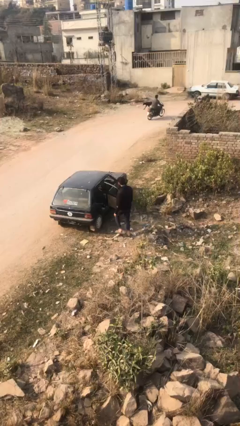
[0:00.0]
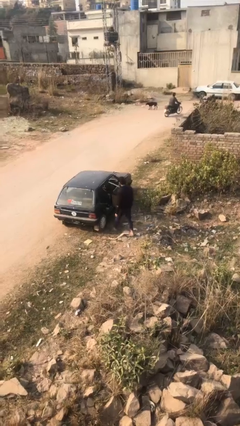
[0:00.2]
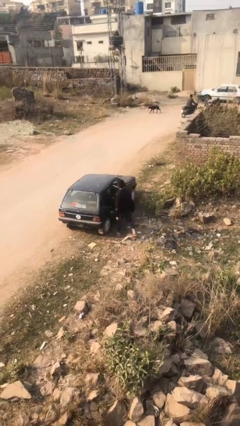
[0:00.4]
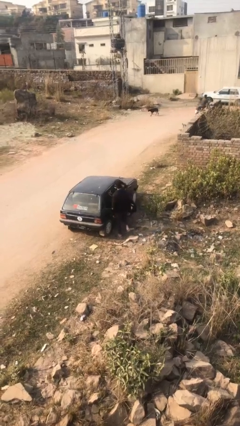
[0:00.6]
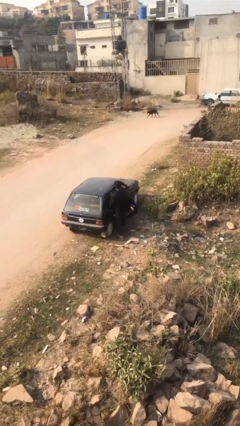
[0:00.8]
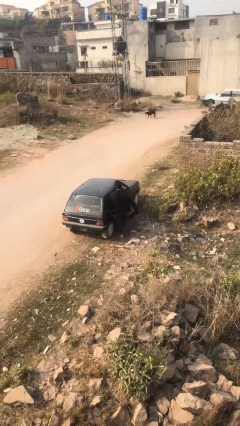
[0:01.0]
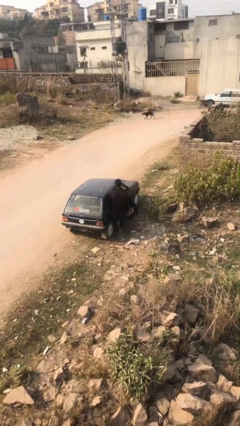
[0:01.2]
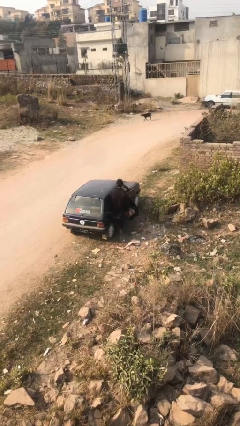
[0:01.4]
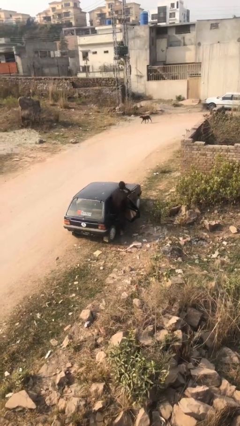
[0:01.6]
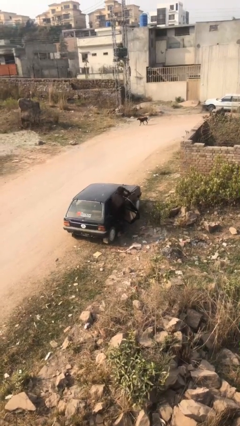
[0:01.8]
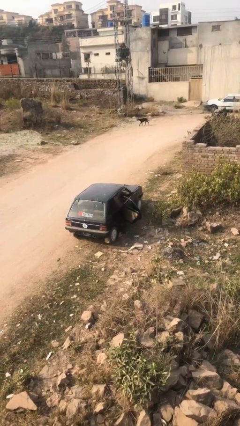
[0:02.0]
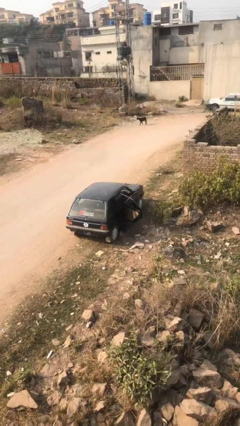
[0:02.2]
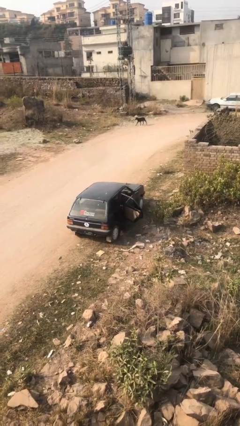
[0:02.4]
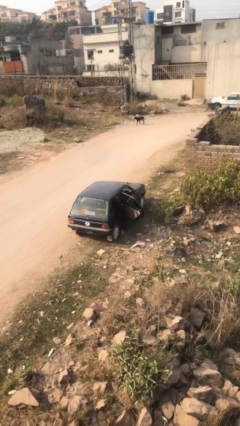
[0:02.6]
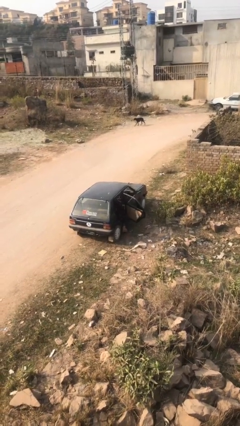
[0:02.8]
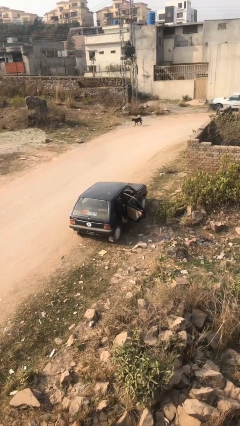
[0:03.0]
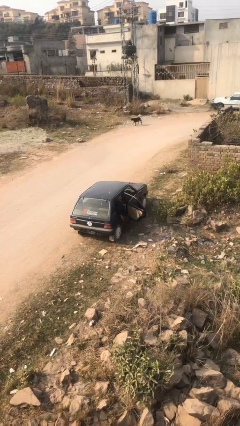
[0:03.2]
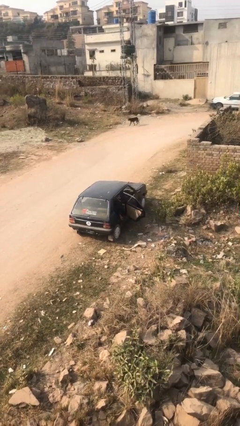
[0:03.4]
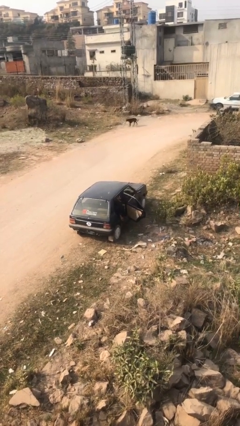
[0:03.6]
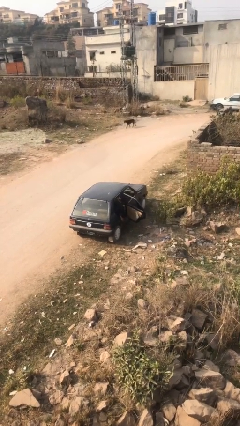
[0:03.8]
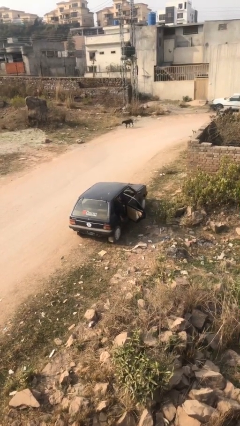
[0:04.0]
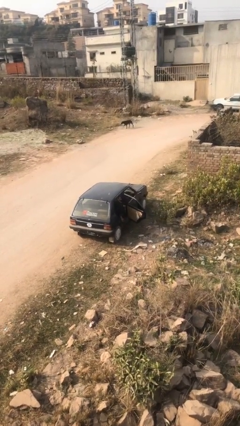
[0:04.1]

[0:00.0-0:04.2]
person enters car

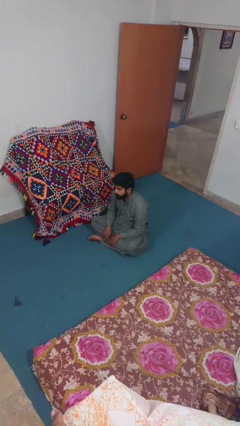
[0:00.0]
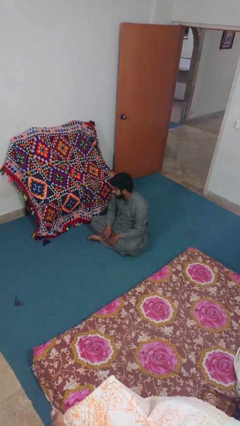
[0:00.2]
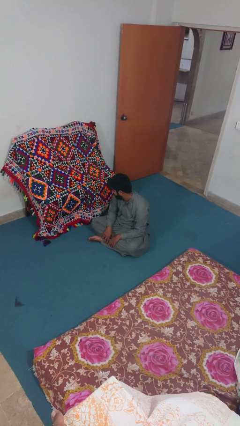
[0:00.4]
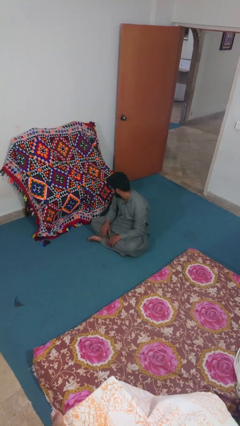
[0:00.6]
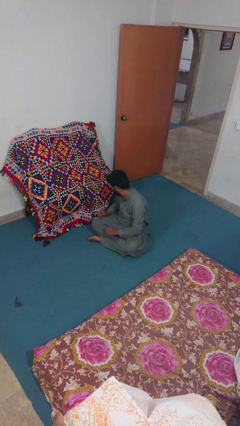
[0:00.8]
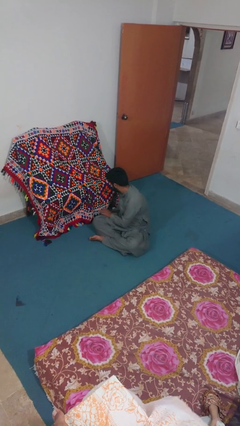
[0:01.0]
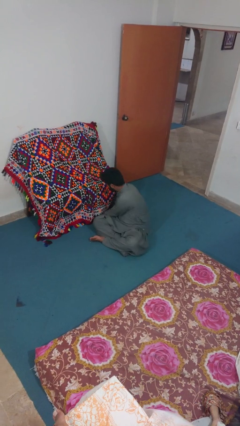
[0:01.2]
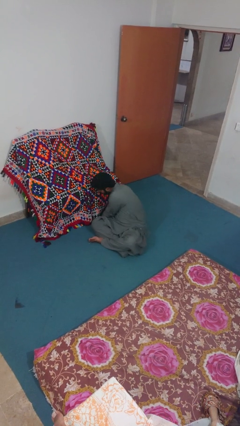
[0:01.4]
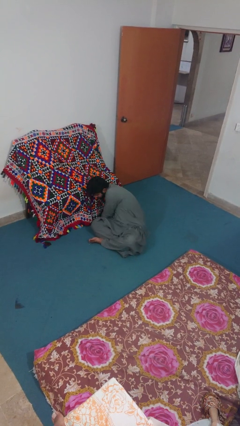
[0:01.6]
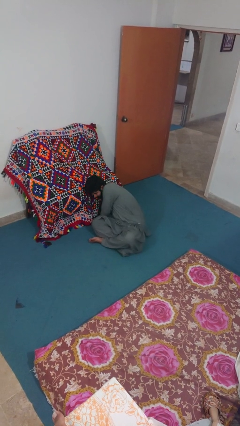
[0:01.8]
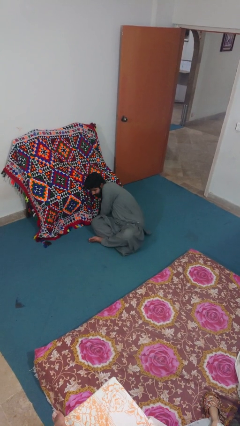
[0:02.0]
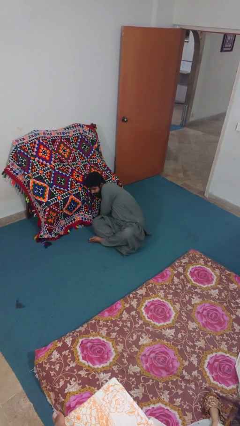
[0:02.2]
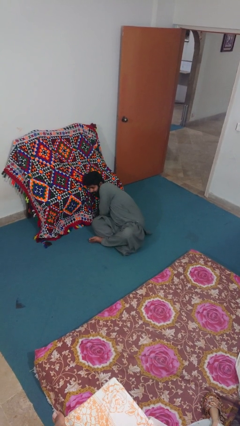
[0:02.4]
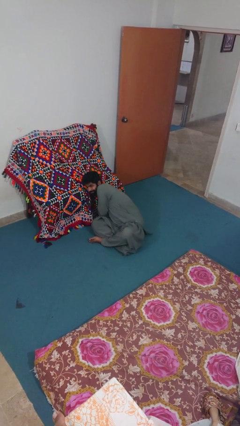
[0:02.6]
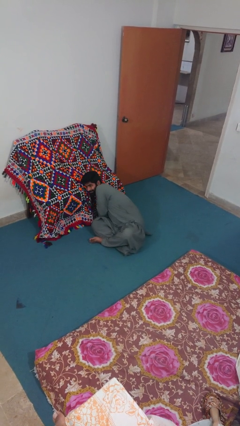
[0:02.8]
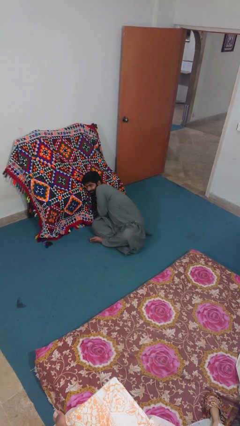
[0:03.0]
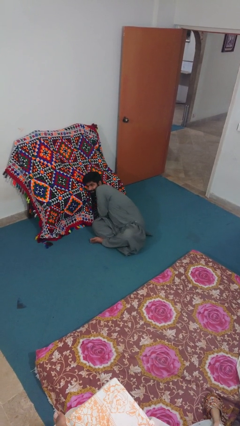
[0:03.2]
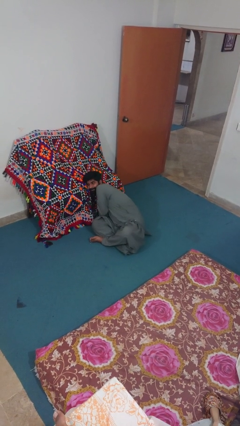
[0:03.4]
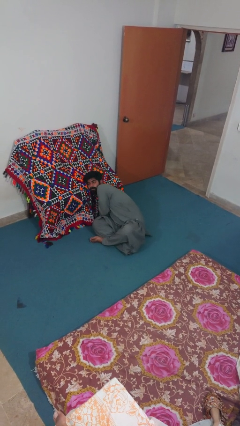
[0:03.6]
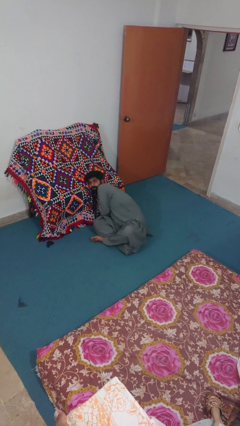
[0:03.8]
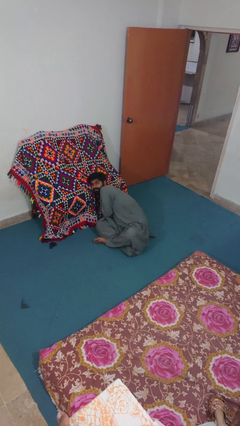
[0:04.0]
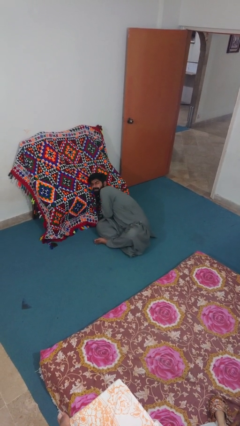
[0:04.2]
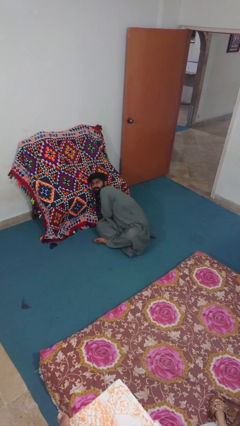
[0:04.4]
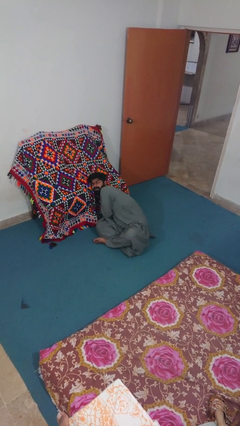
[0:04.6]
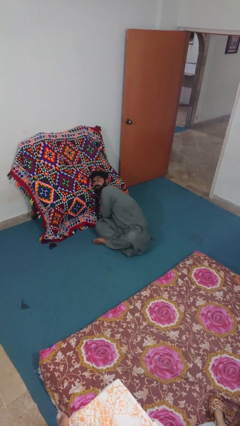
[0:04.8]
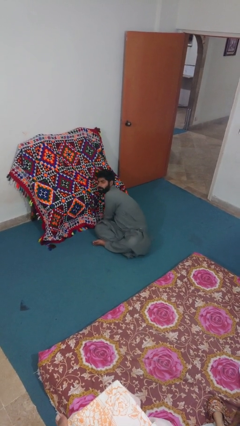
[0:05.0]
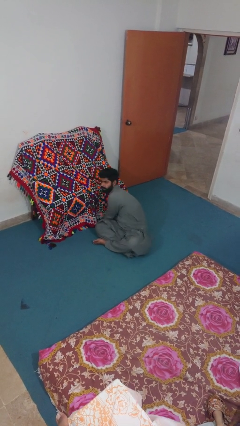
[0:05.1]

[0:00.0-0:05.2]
person searches under couch

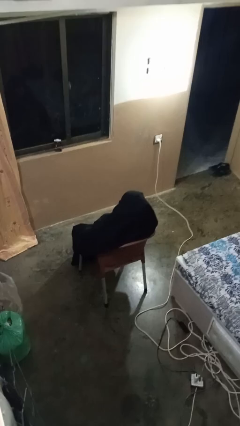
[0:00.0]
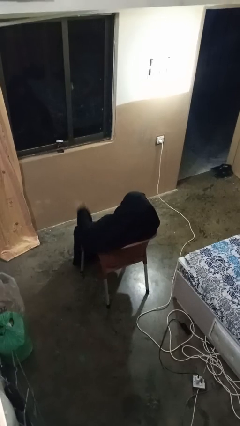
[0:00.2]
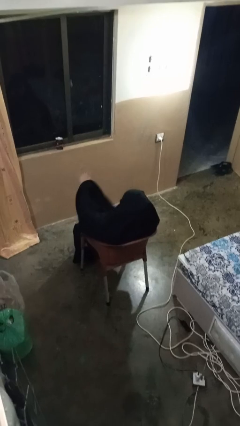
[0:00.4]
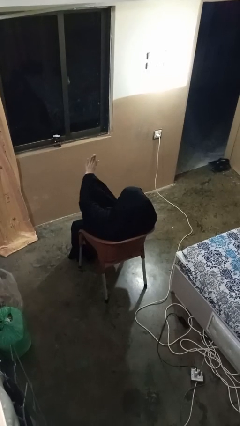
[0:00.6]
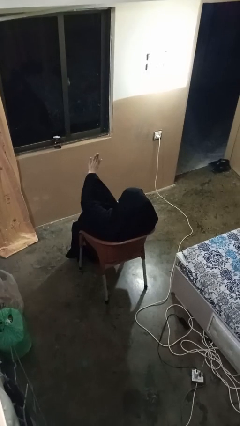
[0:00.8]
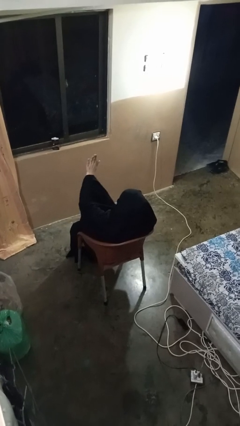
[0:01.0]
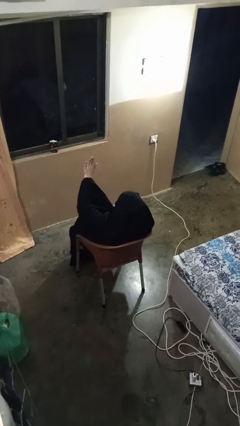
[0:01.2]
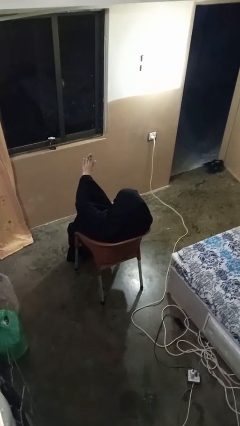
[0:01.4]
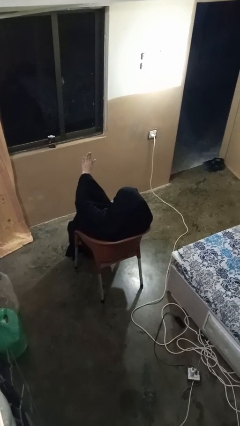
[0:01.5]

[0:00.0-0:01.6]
person gestures raise hand

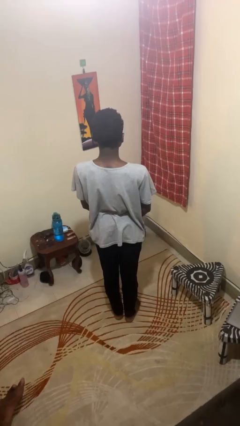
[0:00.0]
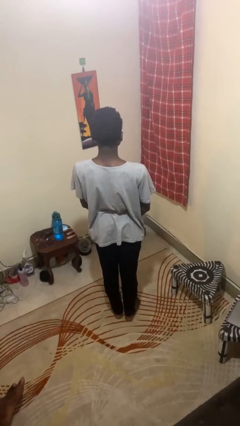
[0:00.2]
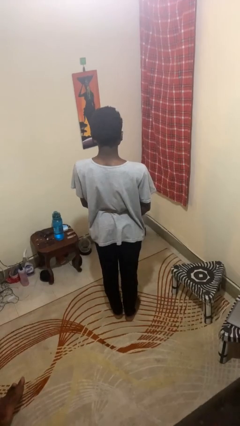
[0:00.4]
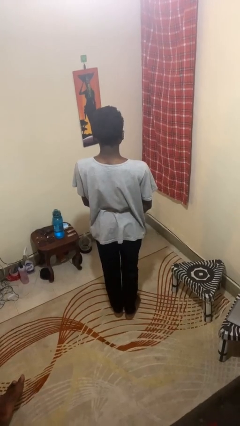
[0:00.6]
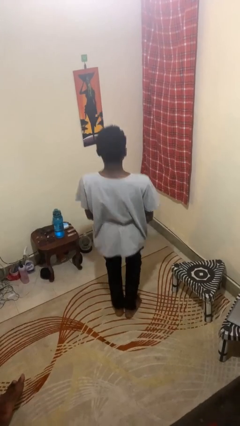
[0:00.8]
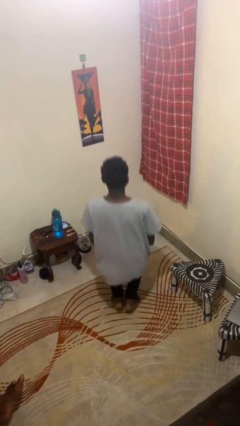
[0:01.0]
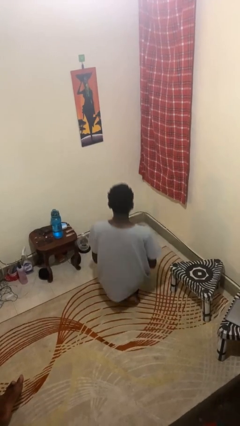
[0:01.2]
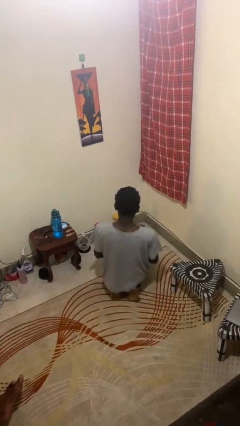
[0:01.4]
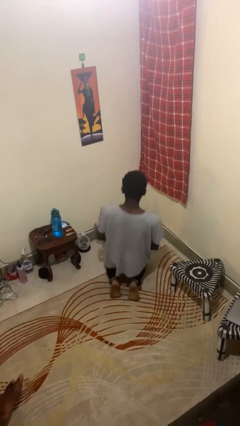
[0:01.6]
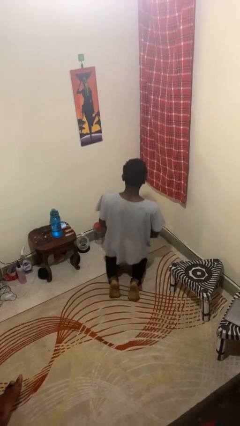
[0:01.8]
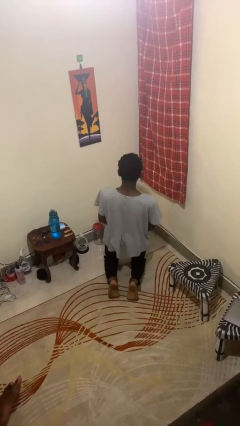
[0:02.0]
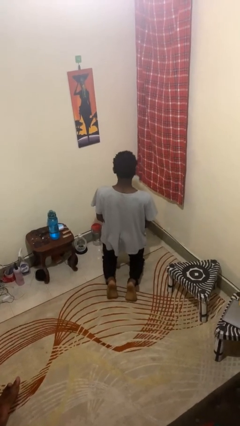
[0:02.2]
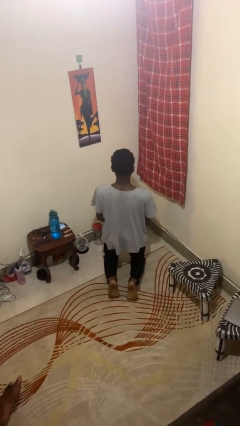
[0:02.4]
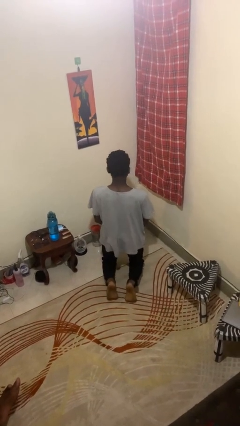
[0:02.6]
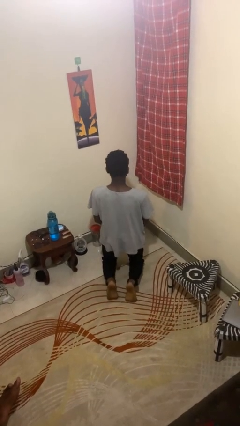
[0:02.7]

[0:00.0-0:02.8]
person kneels

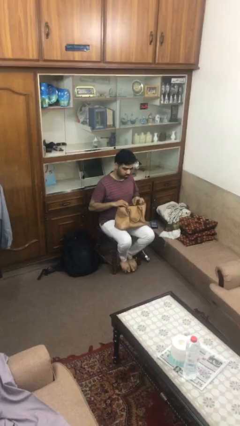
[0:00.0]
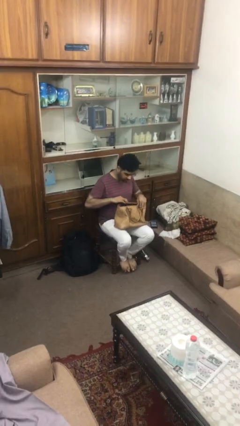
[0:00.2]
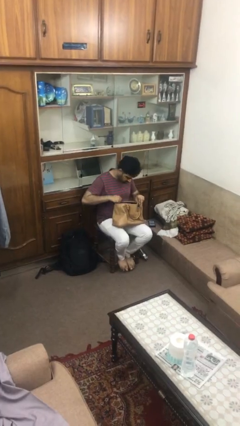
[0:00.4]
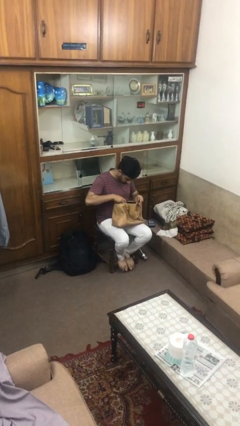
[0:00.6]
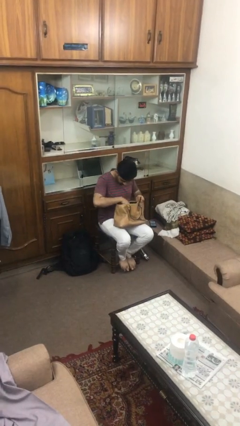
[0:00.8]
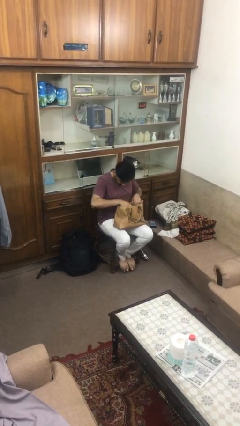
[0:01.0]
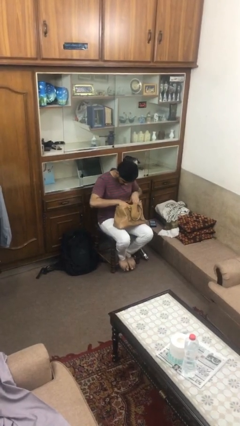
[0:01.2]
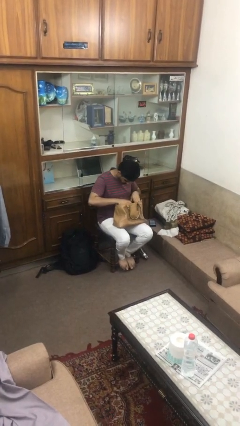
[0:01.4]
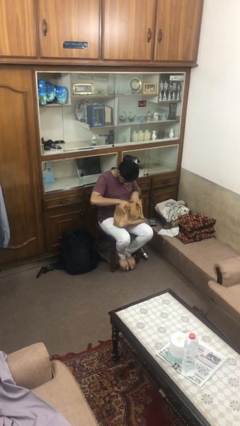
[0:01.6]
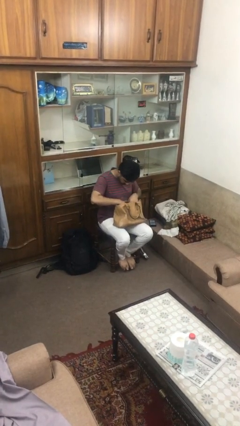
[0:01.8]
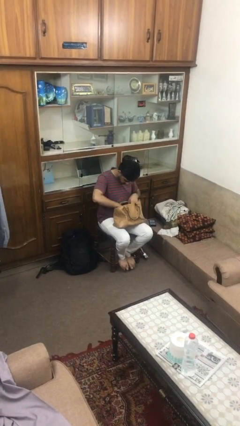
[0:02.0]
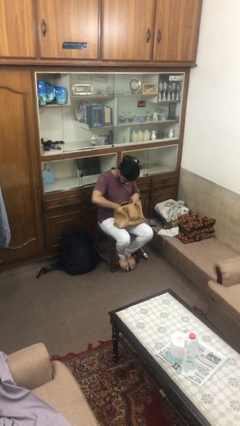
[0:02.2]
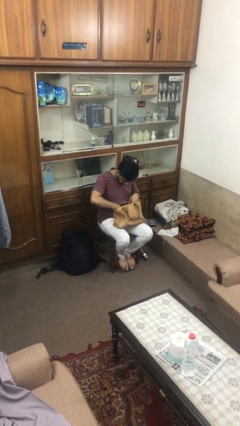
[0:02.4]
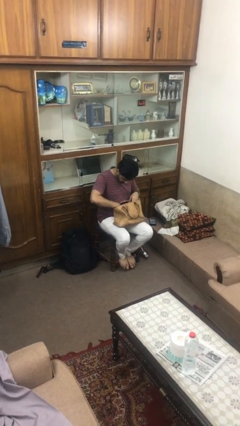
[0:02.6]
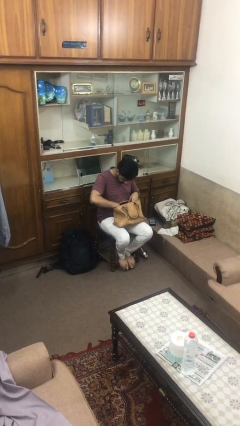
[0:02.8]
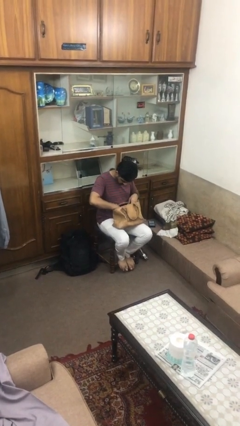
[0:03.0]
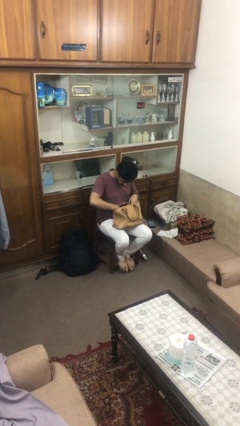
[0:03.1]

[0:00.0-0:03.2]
person searches in purse

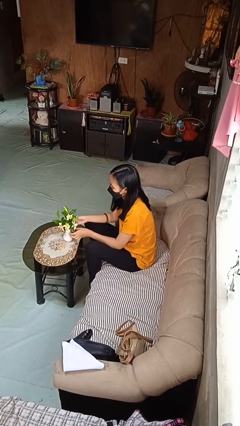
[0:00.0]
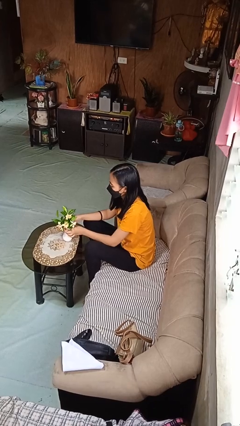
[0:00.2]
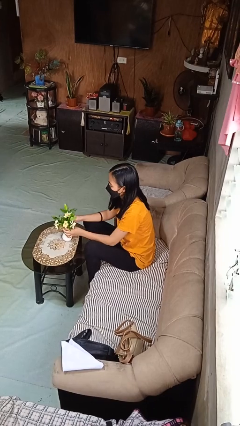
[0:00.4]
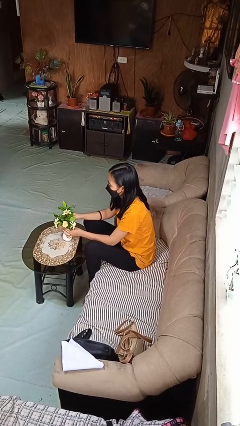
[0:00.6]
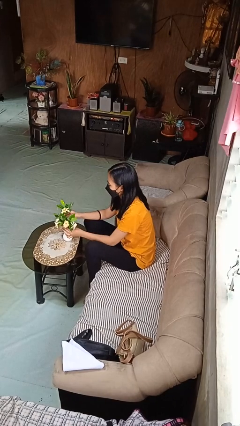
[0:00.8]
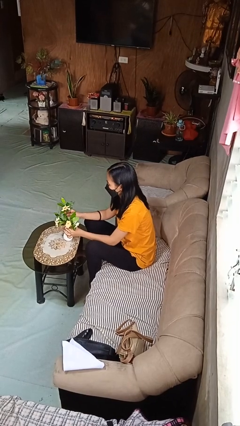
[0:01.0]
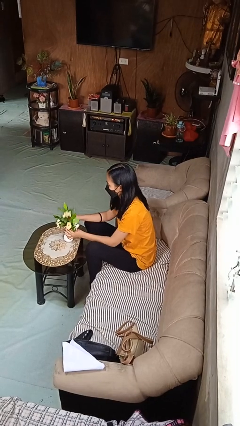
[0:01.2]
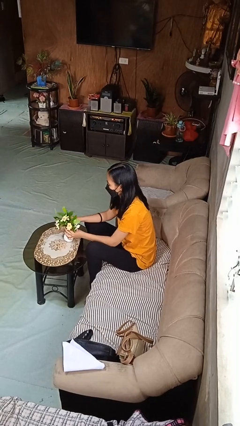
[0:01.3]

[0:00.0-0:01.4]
person arranges flowers in vase
